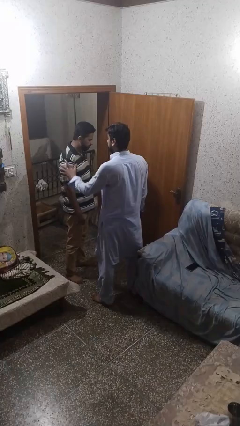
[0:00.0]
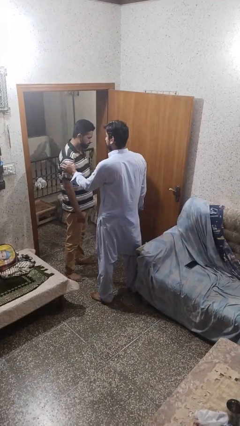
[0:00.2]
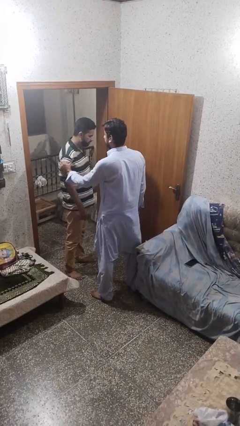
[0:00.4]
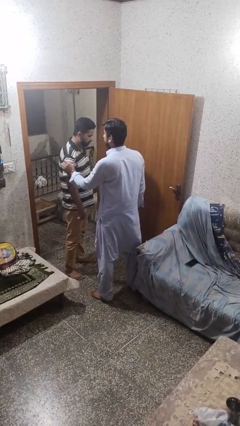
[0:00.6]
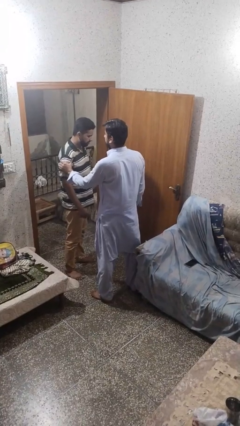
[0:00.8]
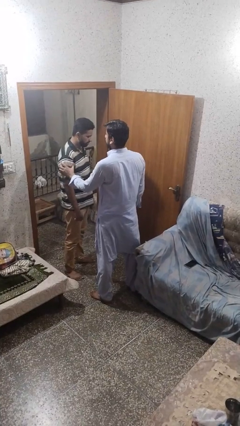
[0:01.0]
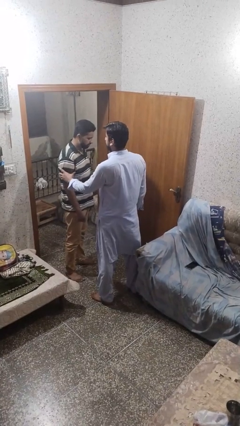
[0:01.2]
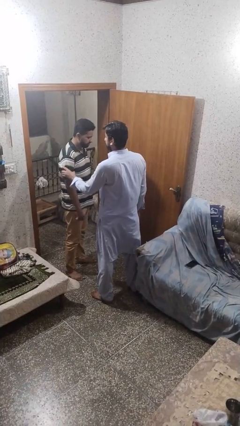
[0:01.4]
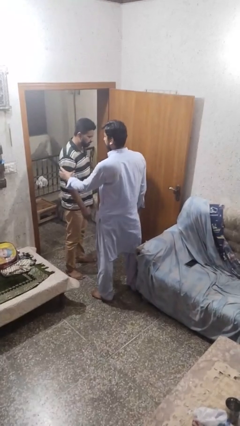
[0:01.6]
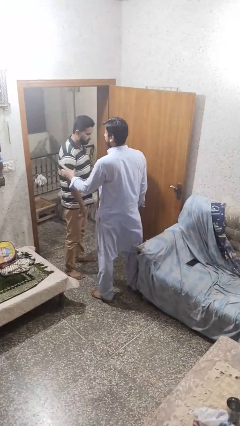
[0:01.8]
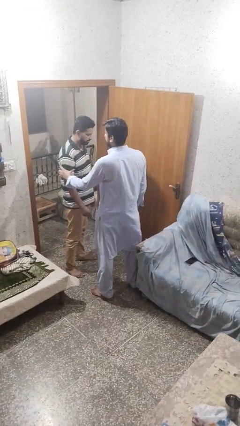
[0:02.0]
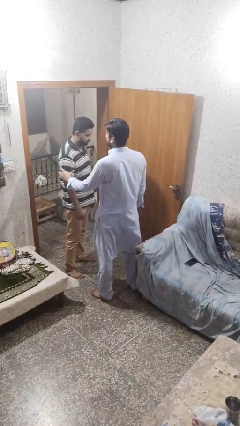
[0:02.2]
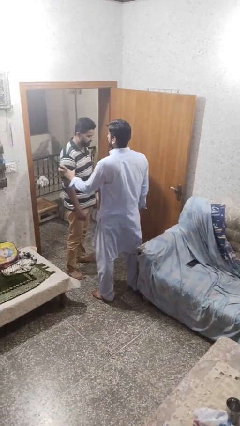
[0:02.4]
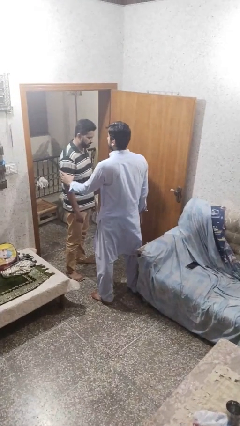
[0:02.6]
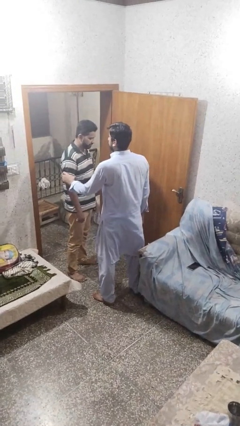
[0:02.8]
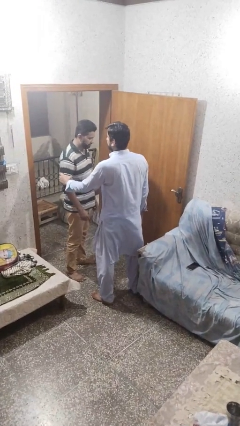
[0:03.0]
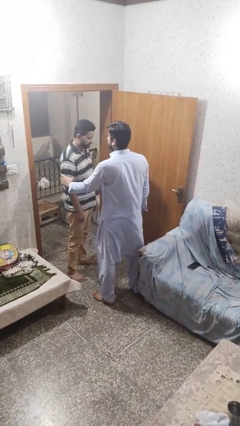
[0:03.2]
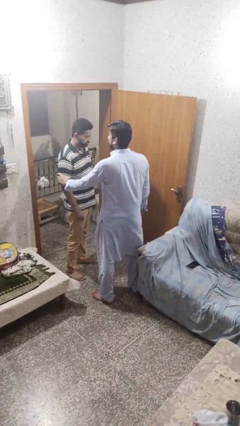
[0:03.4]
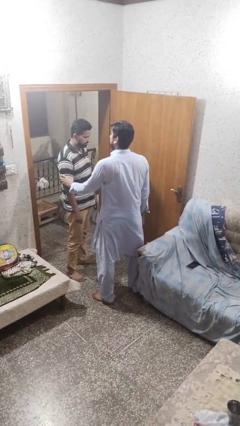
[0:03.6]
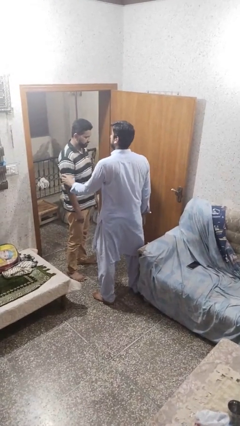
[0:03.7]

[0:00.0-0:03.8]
person grabs person by bicep

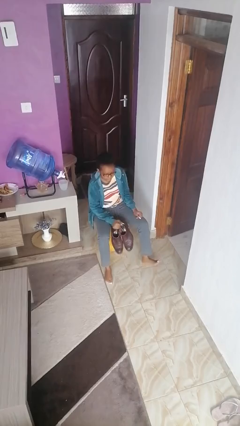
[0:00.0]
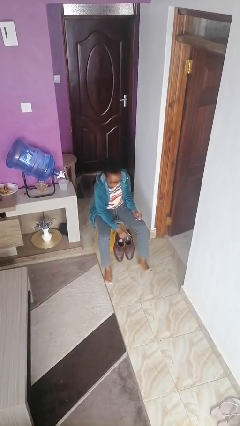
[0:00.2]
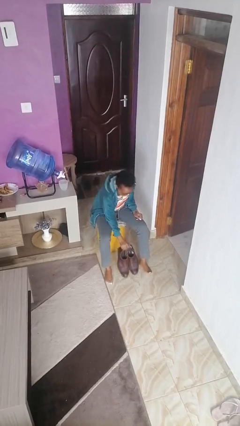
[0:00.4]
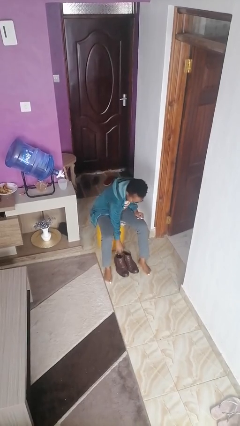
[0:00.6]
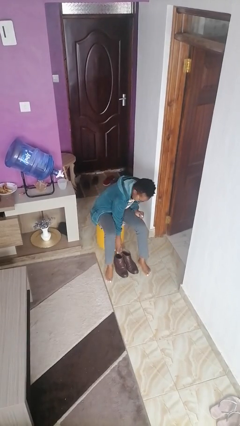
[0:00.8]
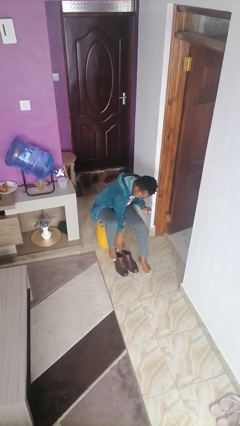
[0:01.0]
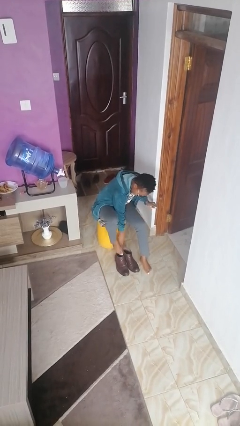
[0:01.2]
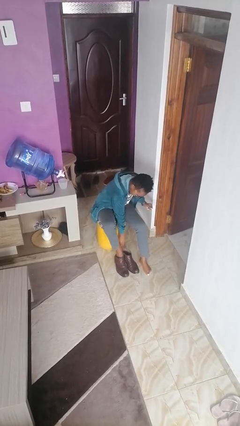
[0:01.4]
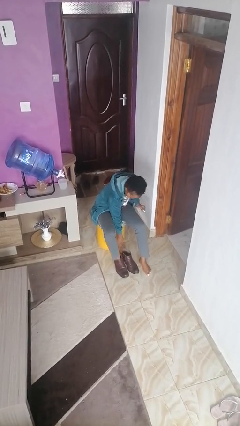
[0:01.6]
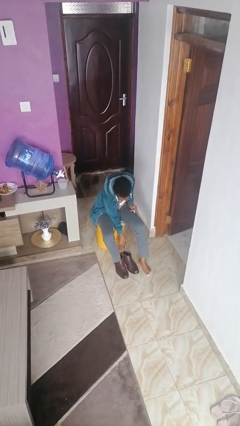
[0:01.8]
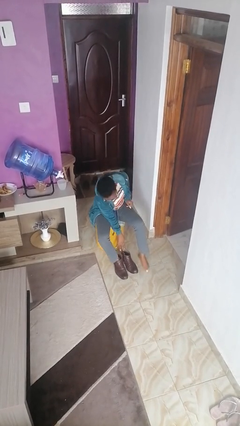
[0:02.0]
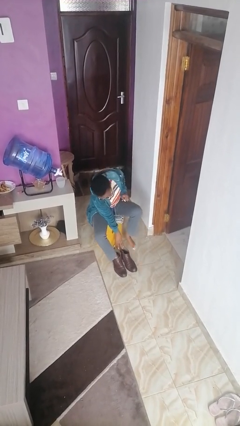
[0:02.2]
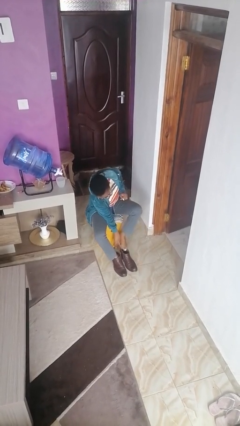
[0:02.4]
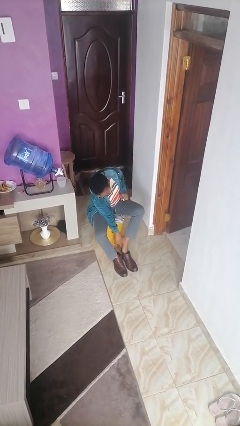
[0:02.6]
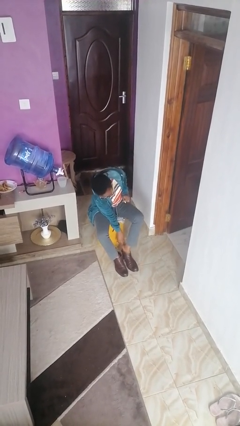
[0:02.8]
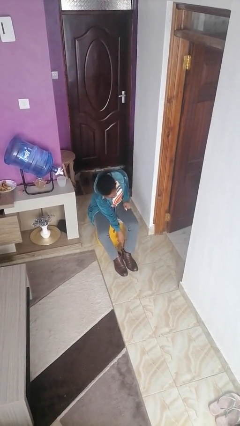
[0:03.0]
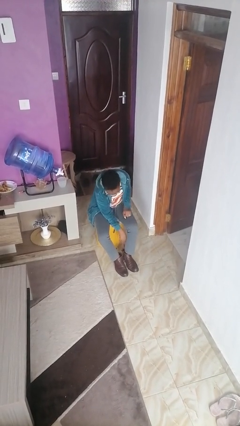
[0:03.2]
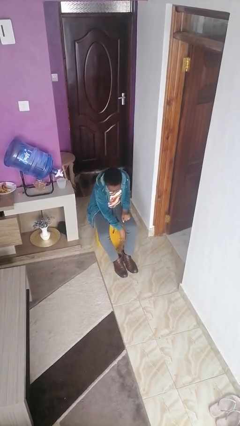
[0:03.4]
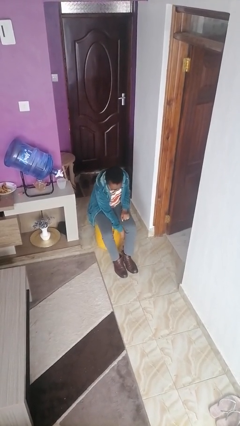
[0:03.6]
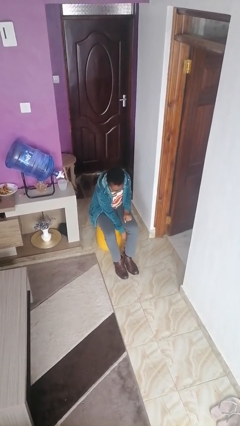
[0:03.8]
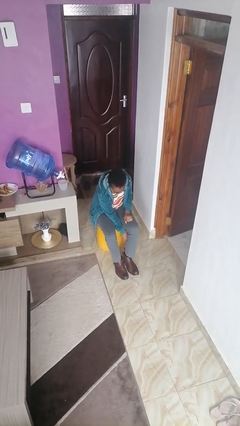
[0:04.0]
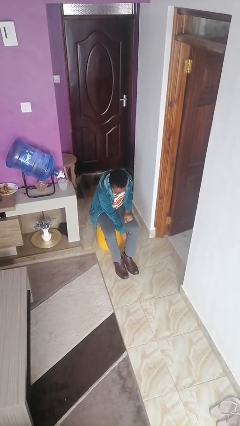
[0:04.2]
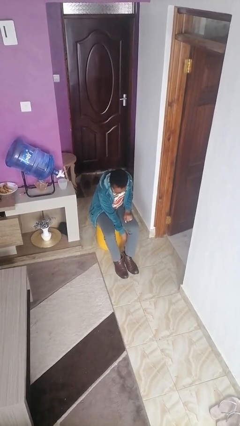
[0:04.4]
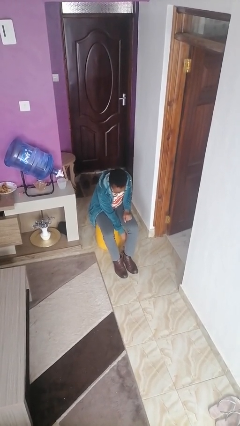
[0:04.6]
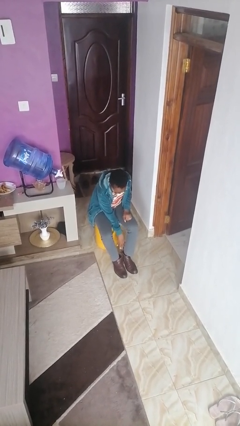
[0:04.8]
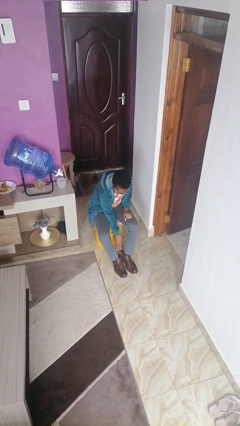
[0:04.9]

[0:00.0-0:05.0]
person puts on boots

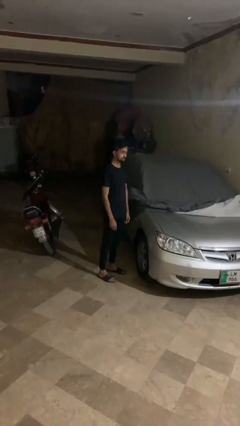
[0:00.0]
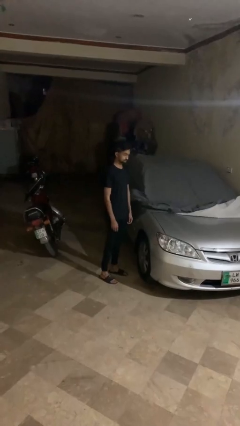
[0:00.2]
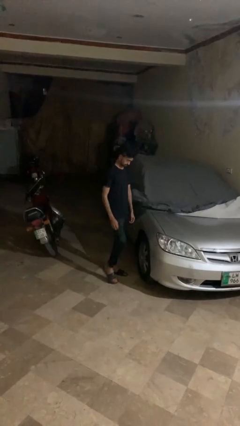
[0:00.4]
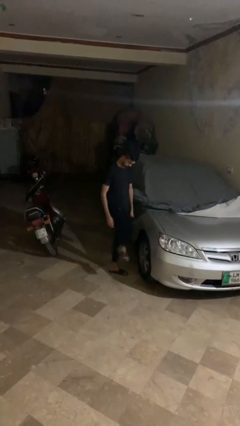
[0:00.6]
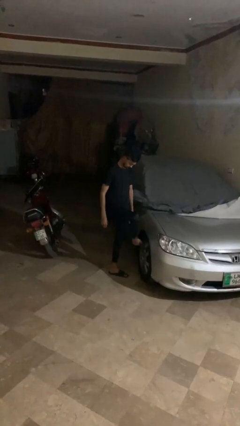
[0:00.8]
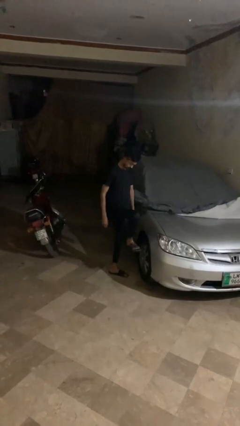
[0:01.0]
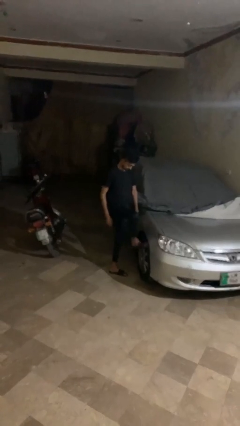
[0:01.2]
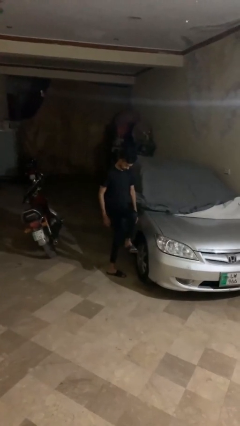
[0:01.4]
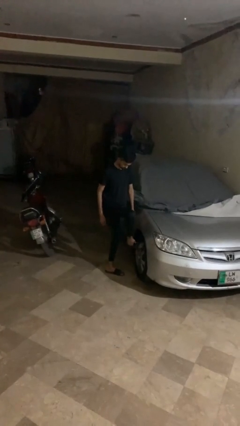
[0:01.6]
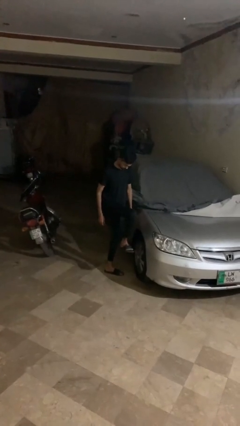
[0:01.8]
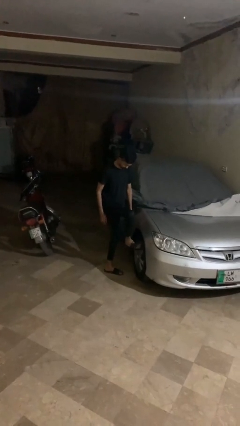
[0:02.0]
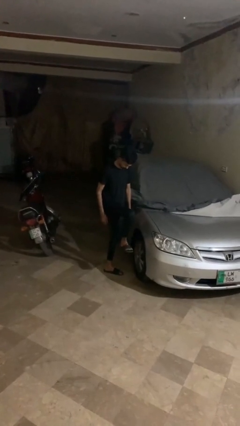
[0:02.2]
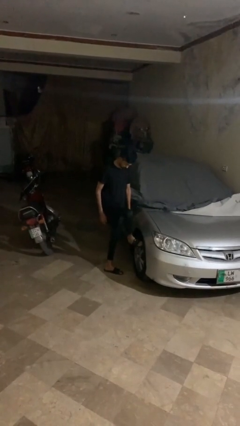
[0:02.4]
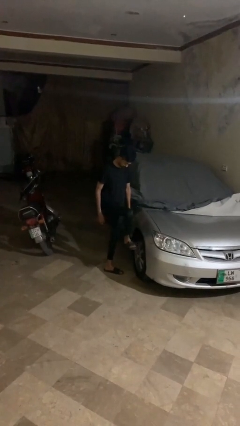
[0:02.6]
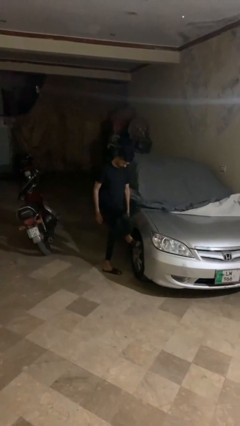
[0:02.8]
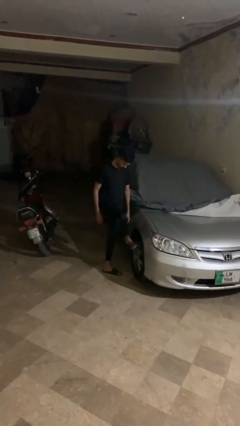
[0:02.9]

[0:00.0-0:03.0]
person kicks car tires

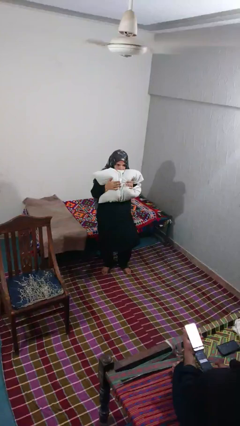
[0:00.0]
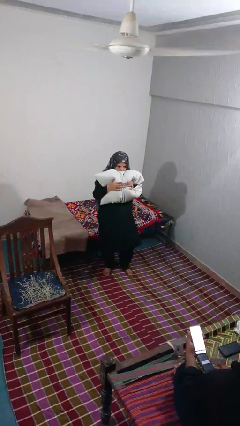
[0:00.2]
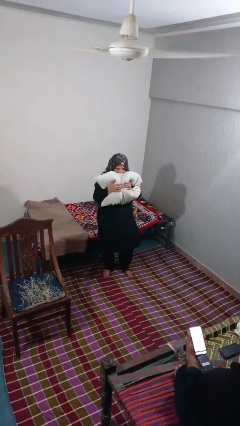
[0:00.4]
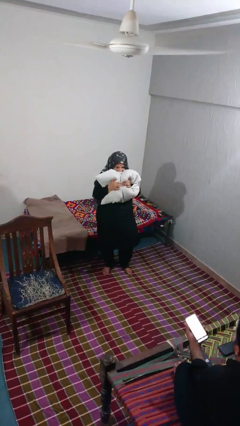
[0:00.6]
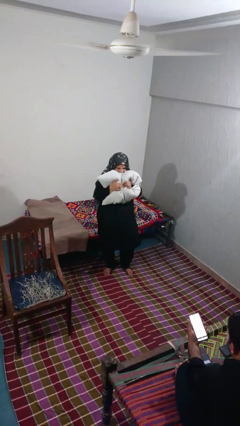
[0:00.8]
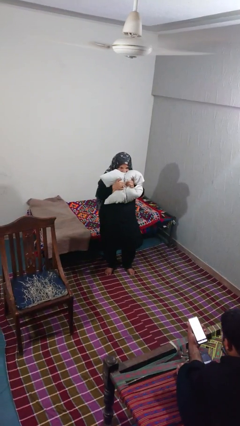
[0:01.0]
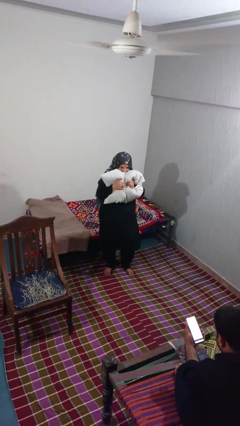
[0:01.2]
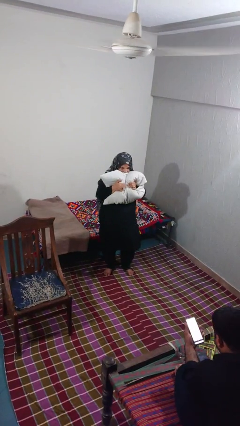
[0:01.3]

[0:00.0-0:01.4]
person squeezes object

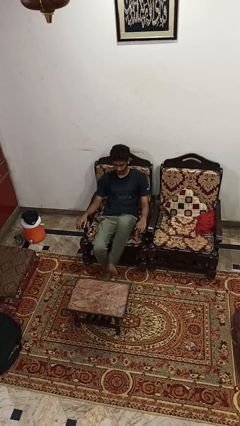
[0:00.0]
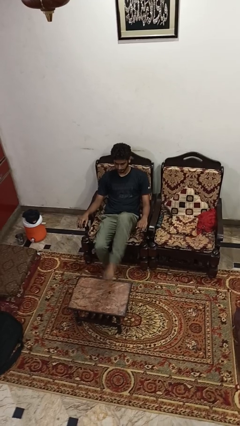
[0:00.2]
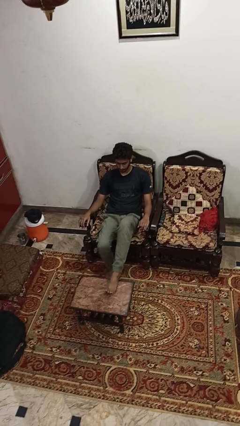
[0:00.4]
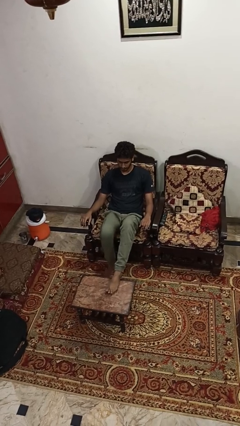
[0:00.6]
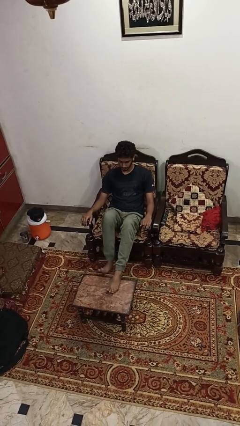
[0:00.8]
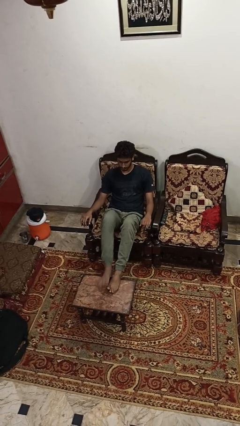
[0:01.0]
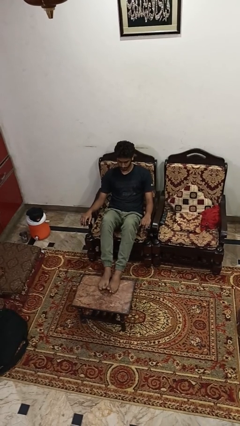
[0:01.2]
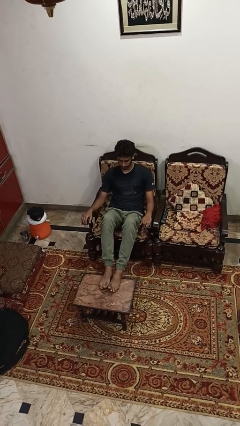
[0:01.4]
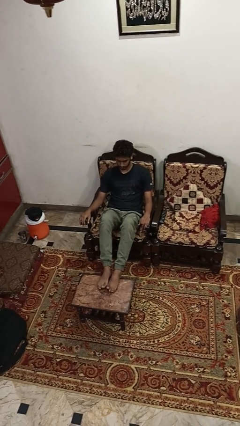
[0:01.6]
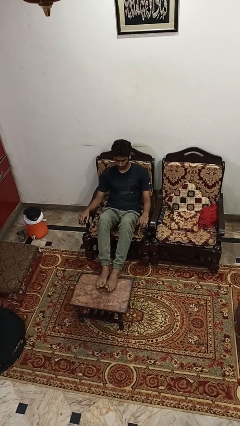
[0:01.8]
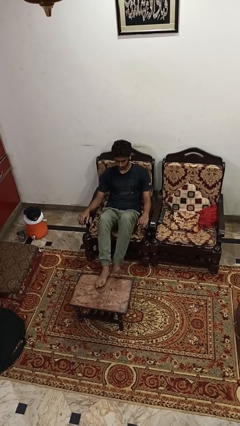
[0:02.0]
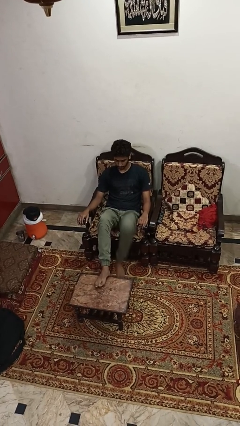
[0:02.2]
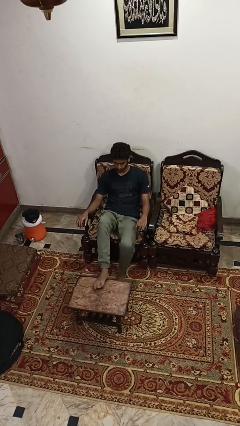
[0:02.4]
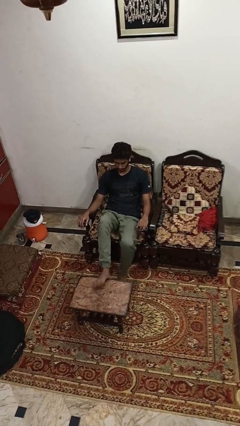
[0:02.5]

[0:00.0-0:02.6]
person puts feet up

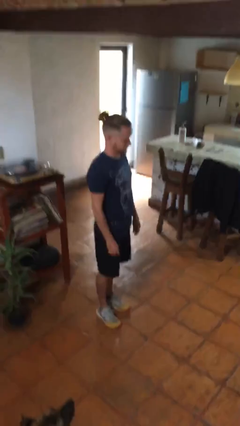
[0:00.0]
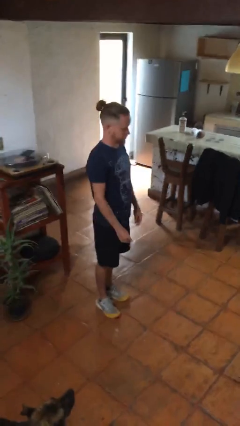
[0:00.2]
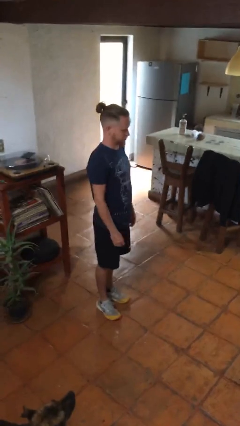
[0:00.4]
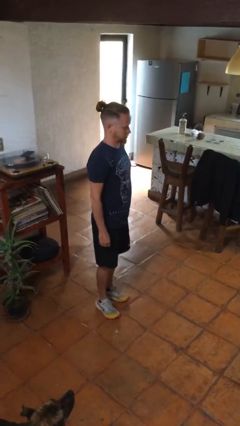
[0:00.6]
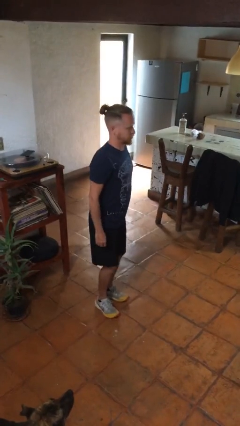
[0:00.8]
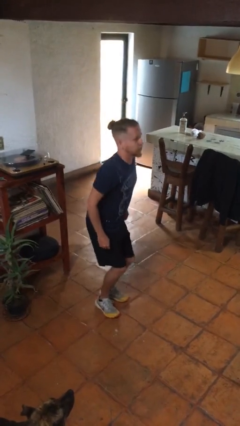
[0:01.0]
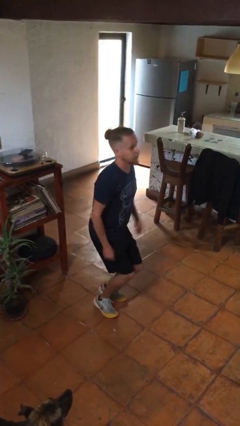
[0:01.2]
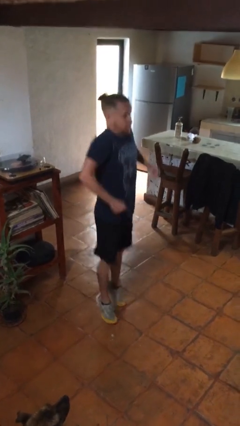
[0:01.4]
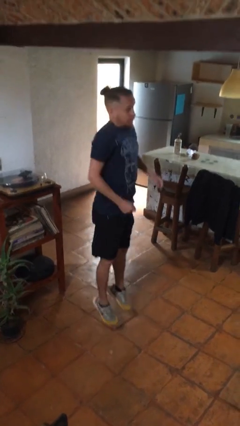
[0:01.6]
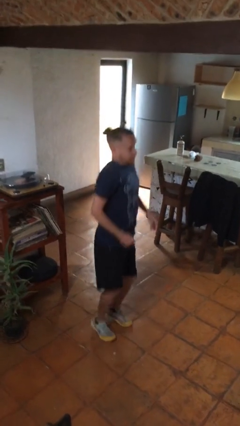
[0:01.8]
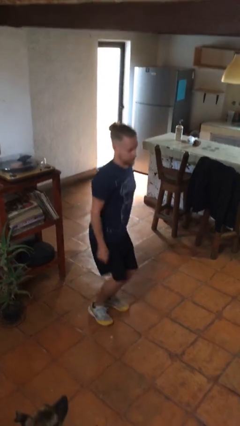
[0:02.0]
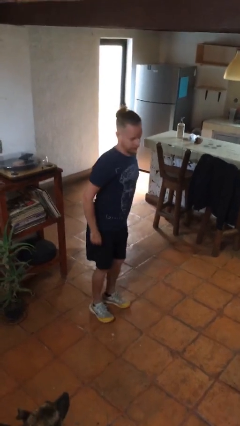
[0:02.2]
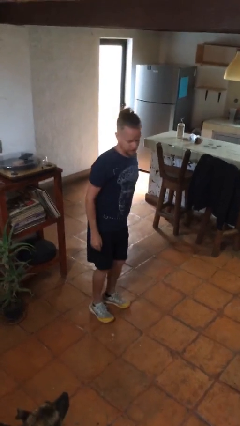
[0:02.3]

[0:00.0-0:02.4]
person jumps
